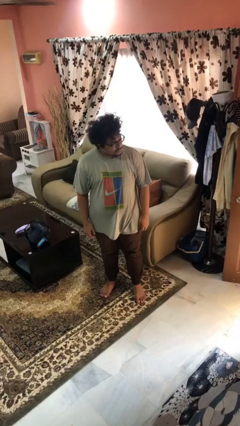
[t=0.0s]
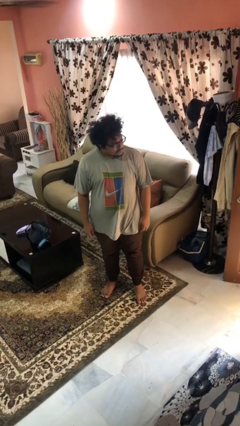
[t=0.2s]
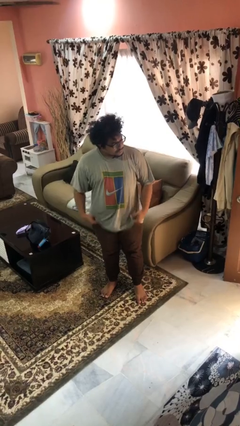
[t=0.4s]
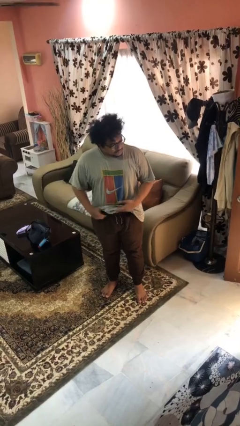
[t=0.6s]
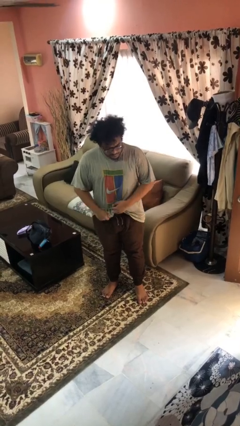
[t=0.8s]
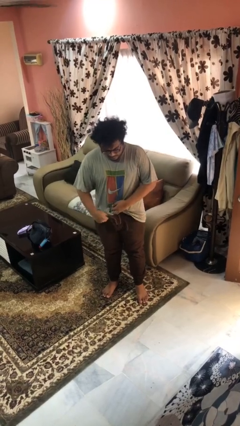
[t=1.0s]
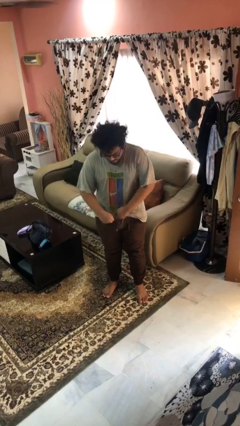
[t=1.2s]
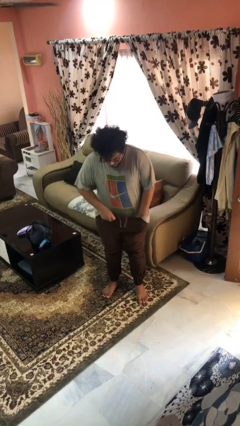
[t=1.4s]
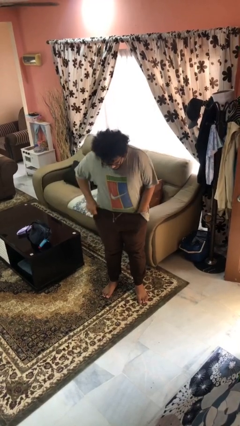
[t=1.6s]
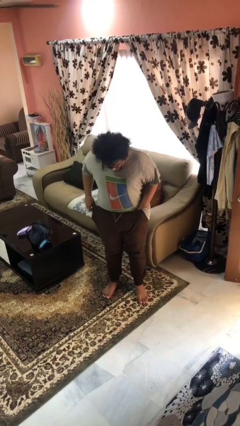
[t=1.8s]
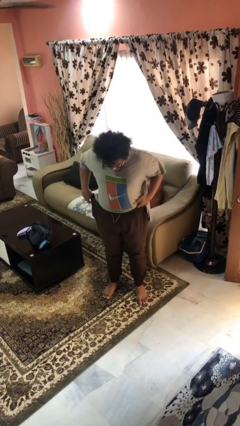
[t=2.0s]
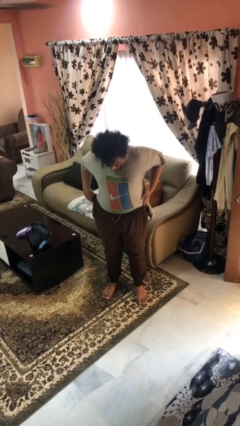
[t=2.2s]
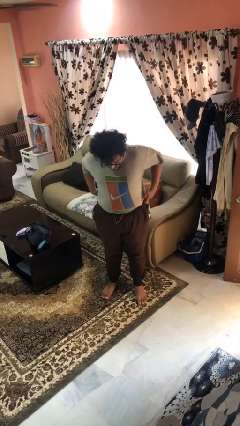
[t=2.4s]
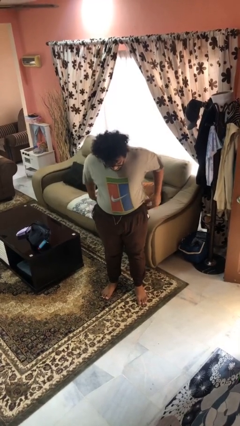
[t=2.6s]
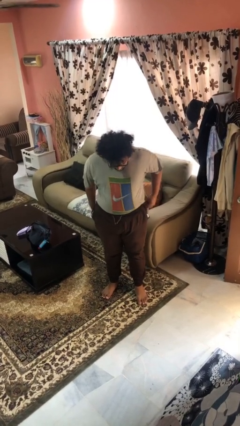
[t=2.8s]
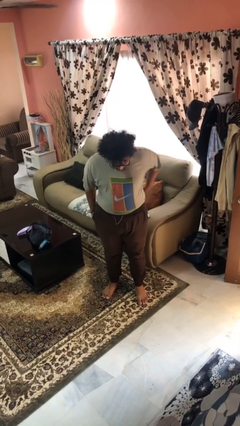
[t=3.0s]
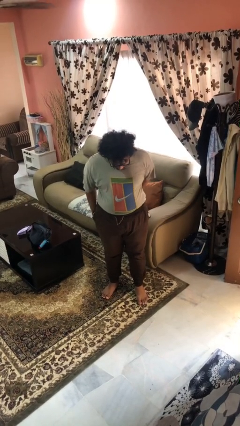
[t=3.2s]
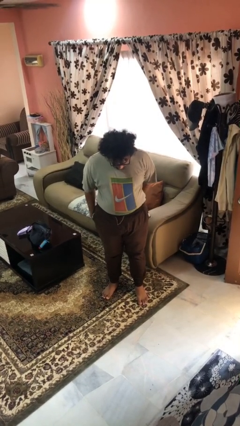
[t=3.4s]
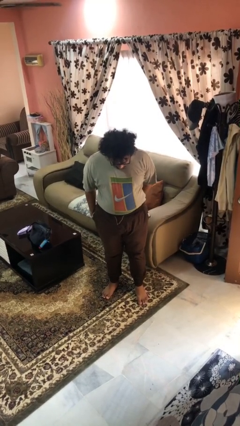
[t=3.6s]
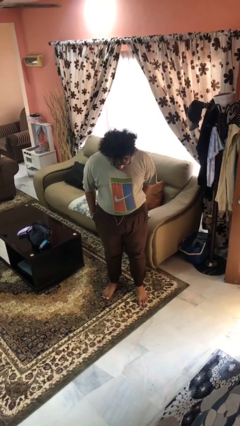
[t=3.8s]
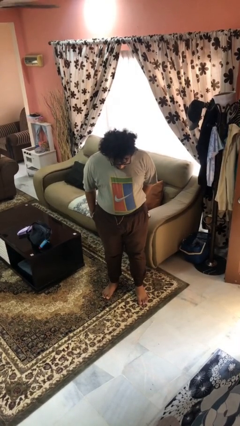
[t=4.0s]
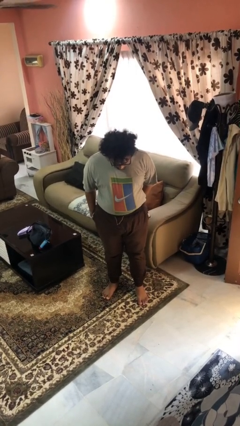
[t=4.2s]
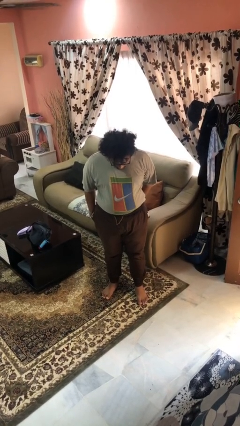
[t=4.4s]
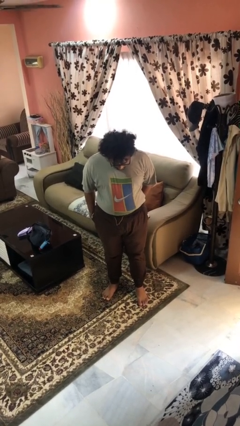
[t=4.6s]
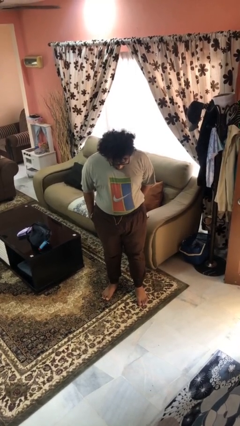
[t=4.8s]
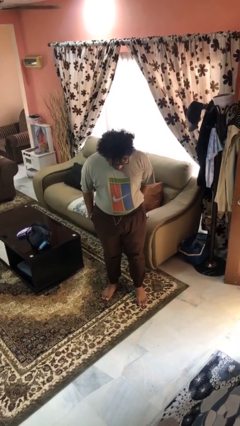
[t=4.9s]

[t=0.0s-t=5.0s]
person tucks in shirt

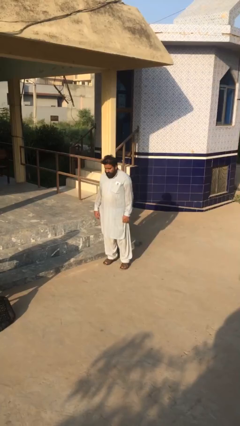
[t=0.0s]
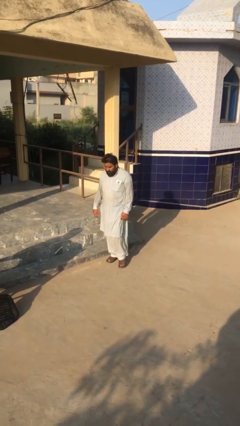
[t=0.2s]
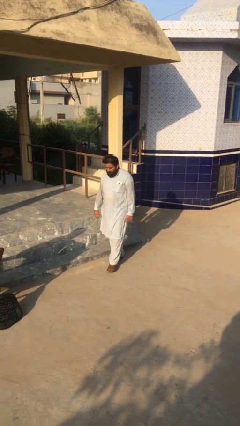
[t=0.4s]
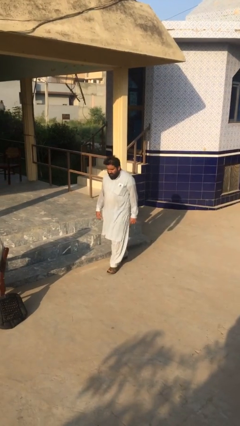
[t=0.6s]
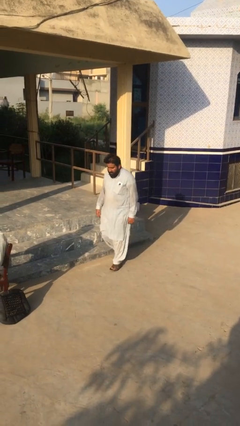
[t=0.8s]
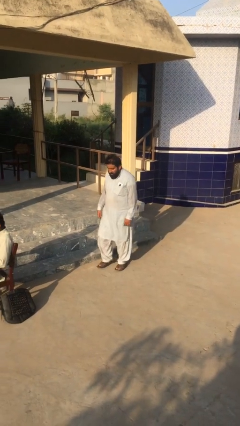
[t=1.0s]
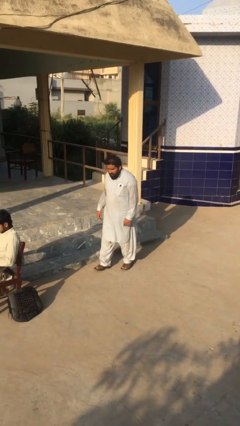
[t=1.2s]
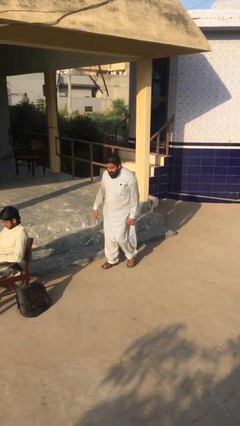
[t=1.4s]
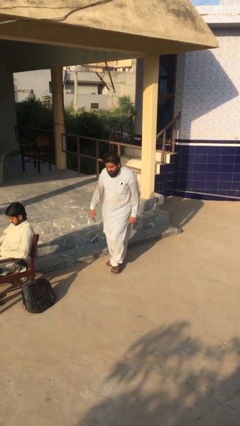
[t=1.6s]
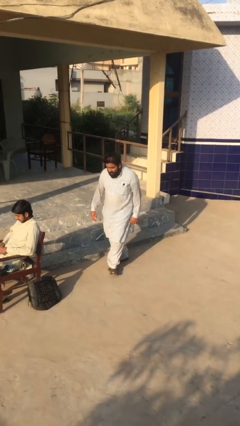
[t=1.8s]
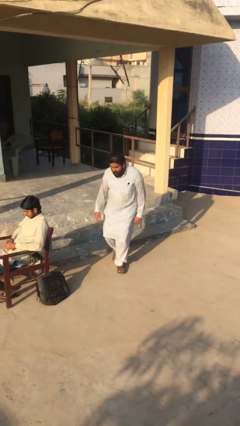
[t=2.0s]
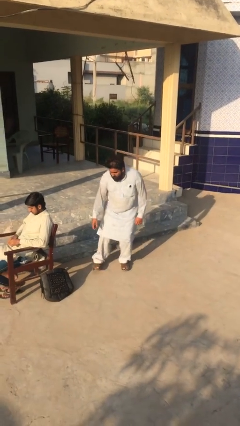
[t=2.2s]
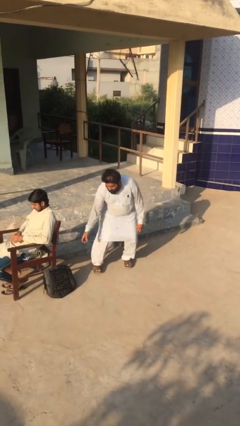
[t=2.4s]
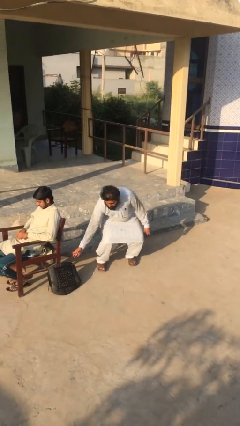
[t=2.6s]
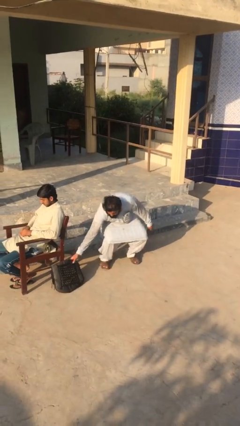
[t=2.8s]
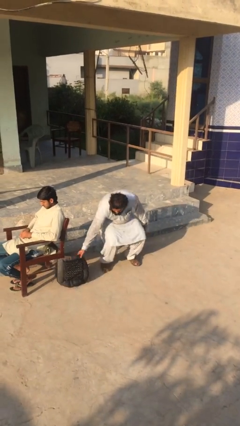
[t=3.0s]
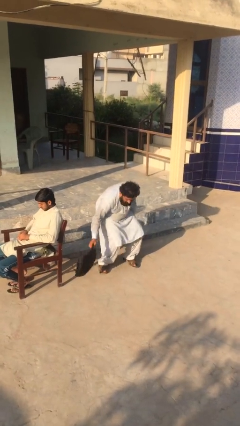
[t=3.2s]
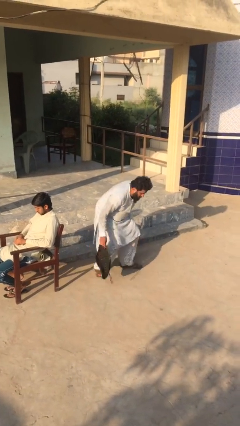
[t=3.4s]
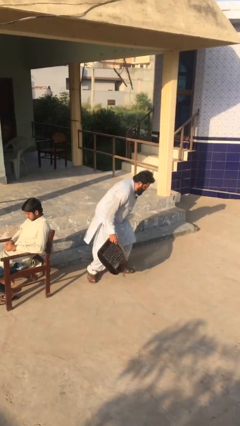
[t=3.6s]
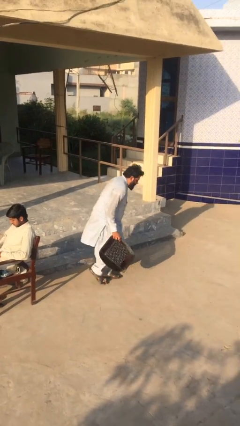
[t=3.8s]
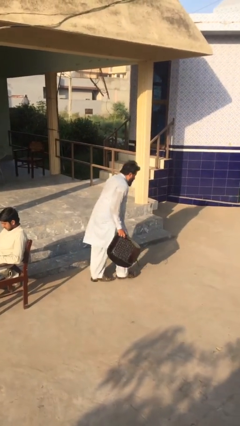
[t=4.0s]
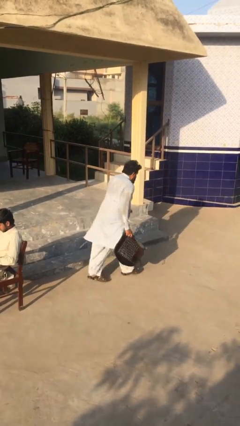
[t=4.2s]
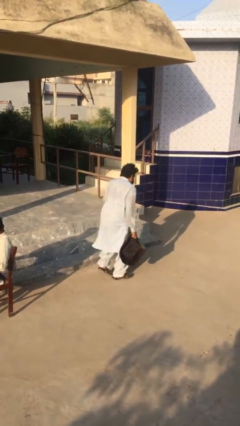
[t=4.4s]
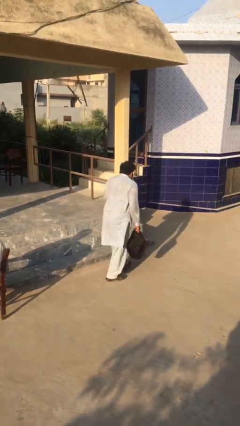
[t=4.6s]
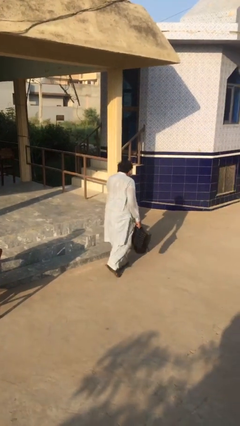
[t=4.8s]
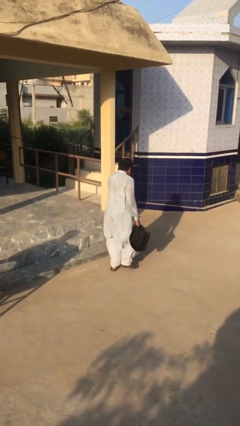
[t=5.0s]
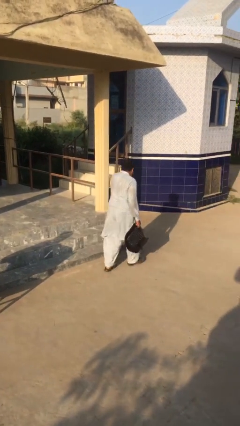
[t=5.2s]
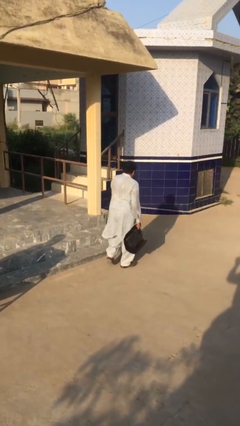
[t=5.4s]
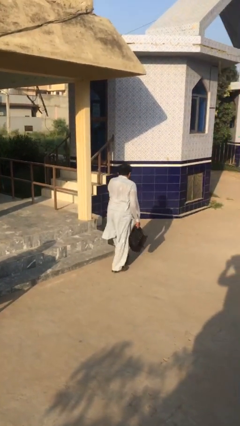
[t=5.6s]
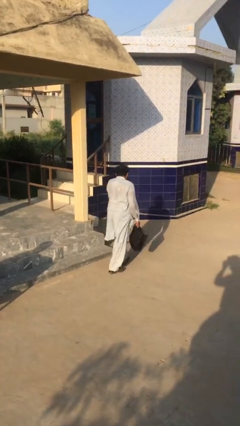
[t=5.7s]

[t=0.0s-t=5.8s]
person steals object from person

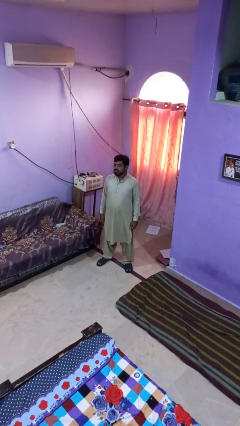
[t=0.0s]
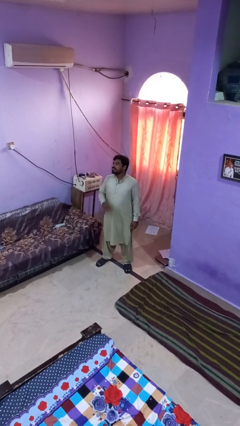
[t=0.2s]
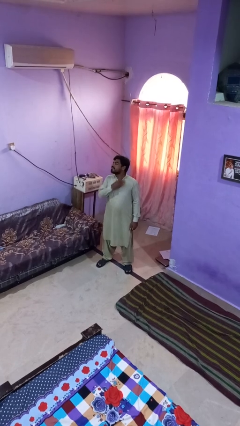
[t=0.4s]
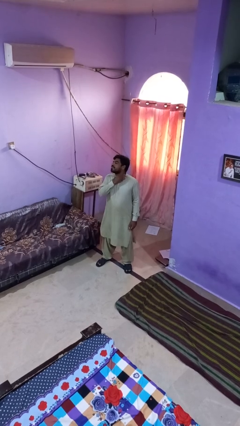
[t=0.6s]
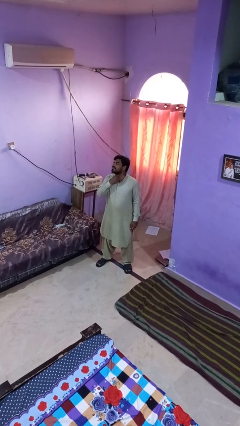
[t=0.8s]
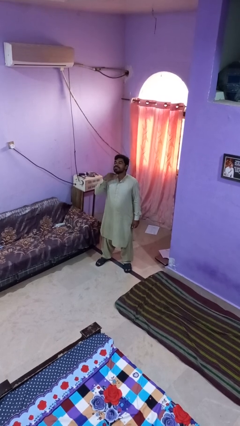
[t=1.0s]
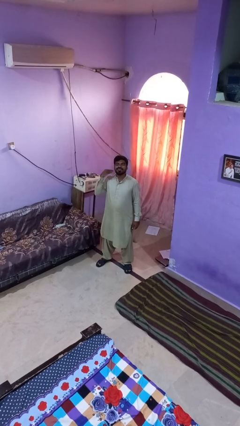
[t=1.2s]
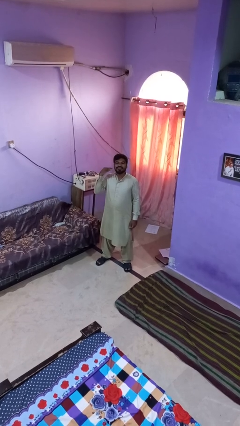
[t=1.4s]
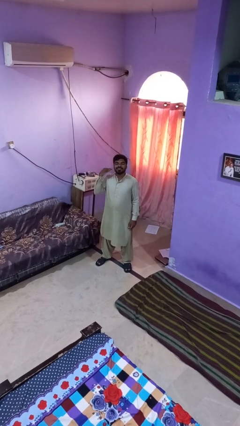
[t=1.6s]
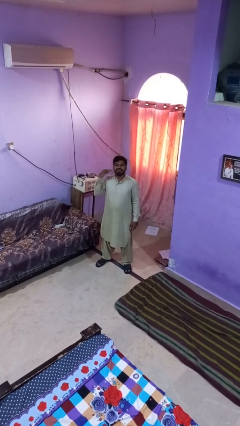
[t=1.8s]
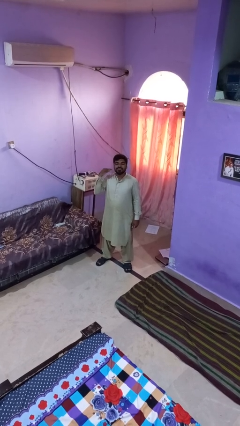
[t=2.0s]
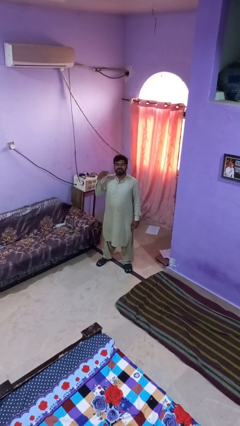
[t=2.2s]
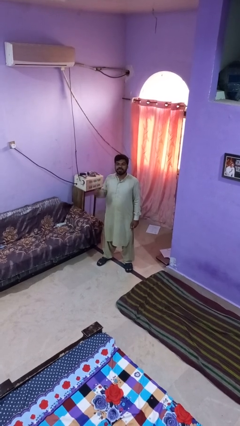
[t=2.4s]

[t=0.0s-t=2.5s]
person gestures cut

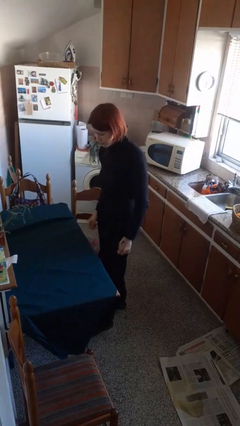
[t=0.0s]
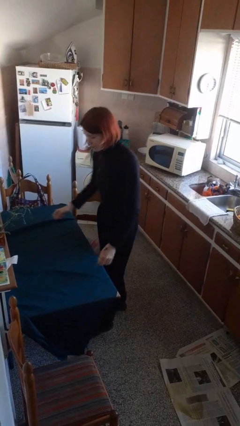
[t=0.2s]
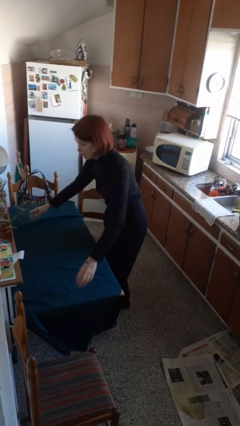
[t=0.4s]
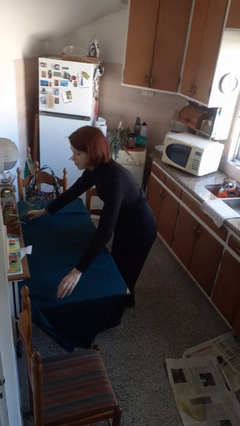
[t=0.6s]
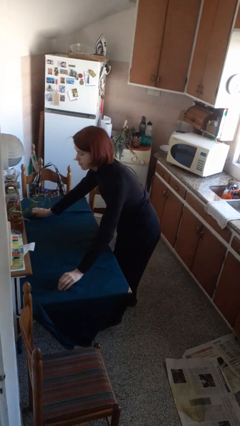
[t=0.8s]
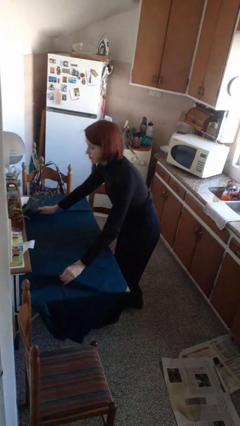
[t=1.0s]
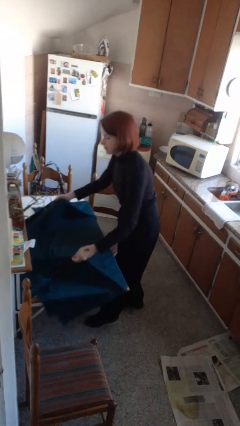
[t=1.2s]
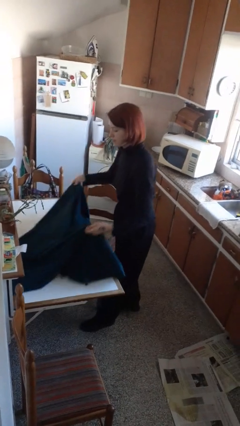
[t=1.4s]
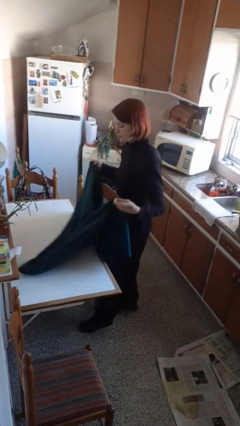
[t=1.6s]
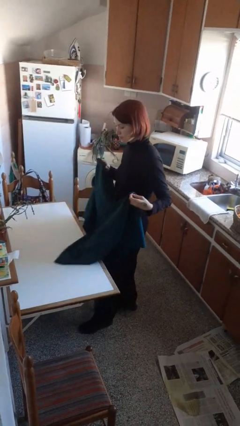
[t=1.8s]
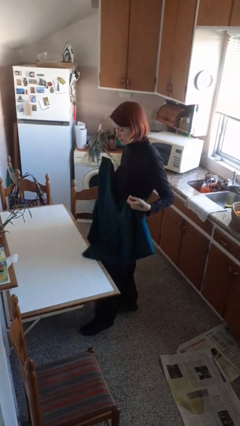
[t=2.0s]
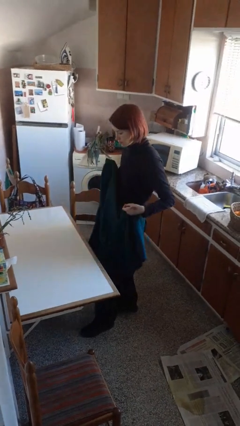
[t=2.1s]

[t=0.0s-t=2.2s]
person folds tablecloth

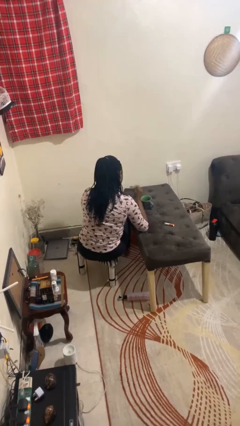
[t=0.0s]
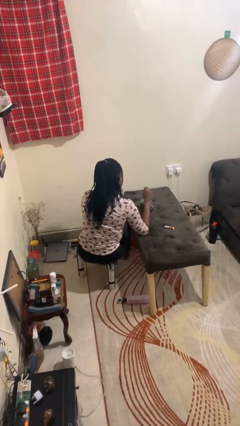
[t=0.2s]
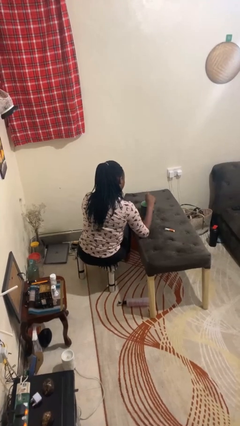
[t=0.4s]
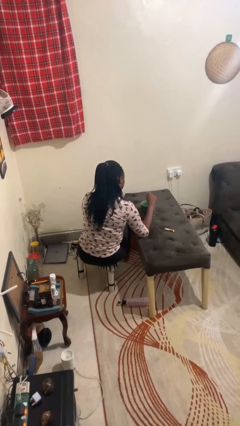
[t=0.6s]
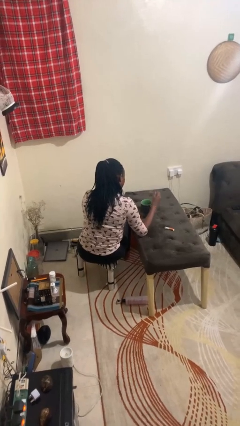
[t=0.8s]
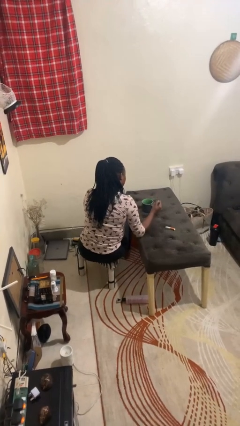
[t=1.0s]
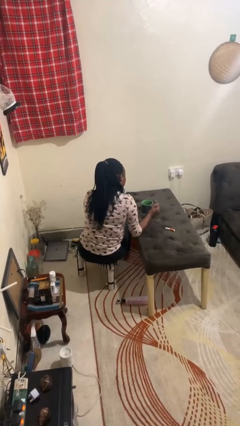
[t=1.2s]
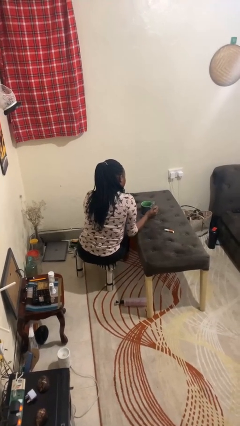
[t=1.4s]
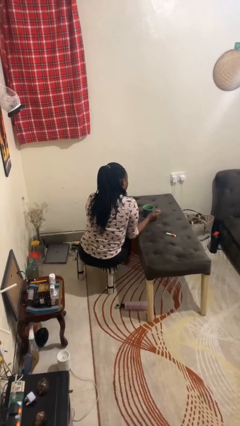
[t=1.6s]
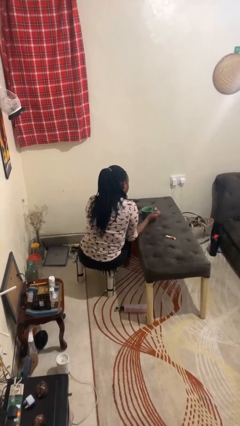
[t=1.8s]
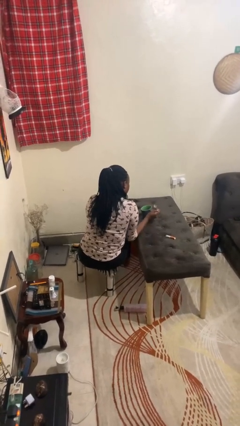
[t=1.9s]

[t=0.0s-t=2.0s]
person stirs mug
